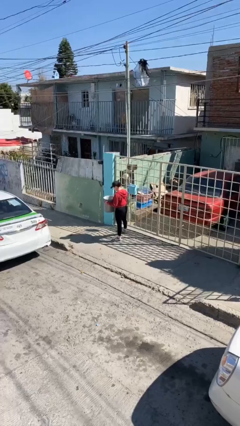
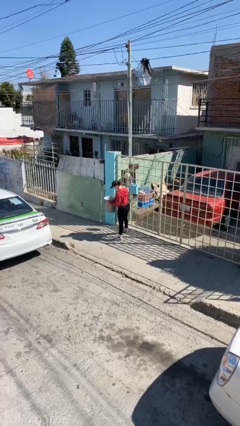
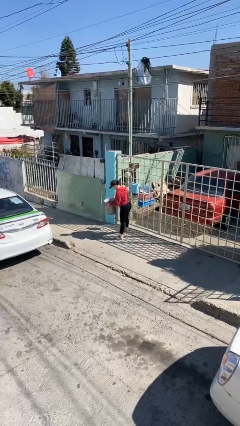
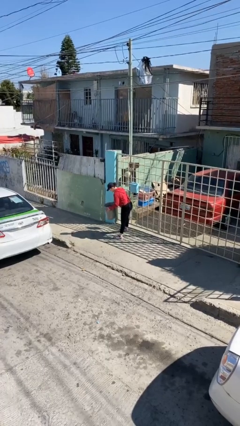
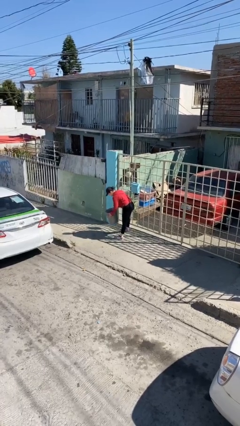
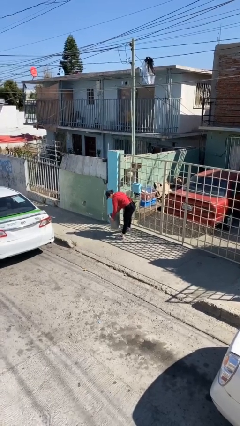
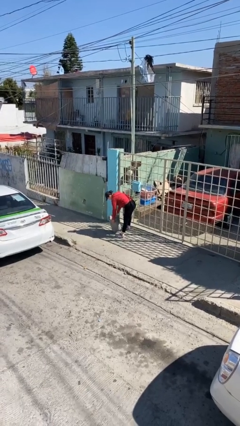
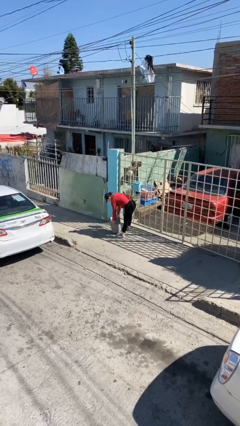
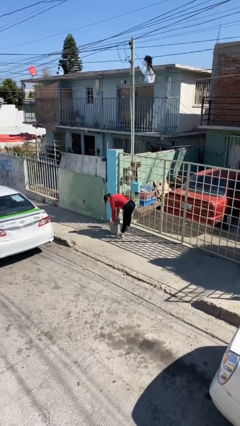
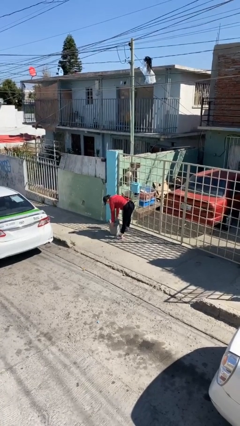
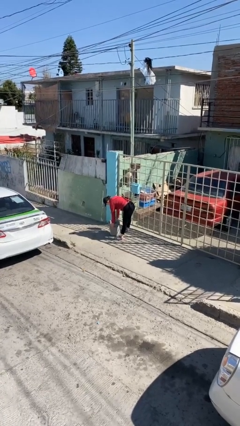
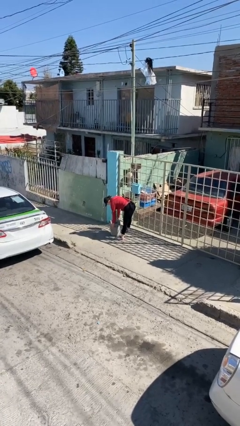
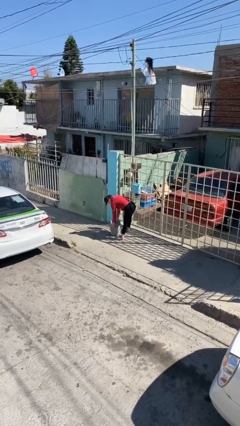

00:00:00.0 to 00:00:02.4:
person puts down object on floor

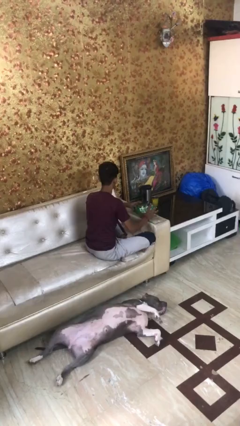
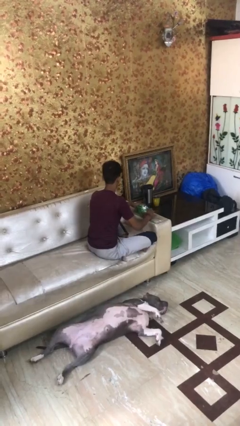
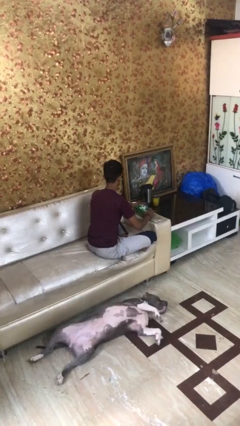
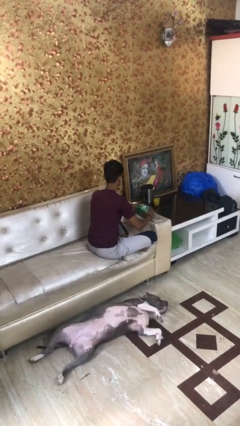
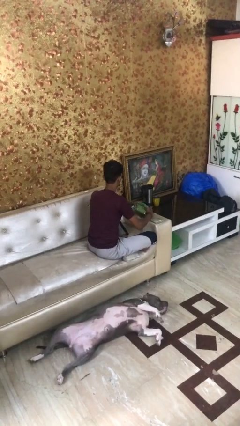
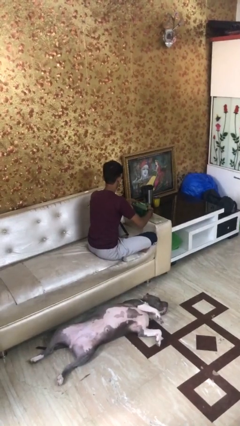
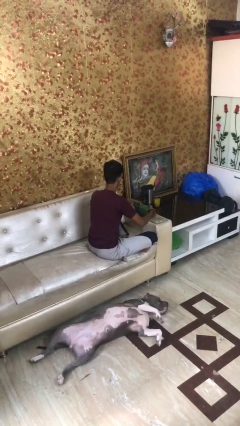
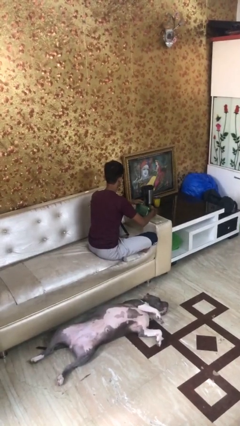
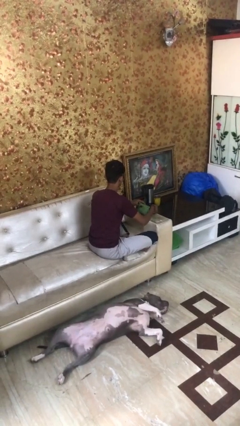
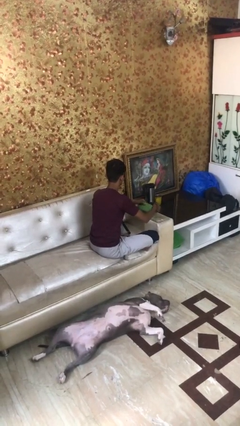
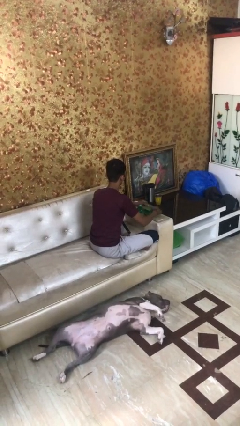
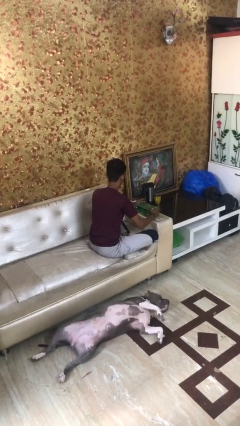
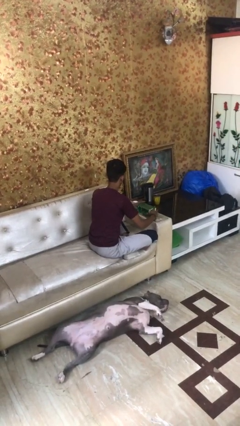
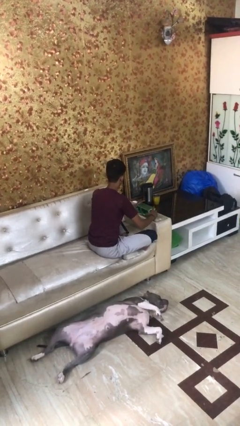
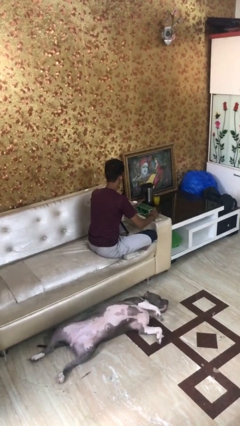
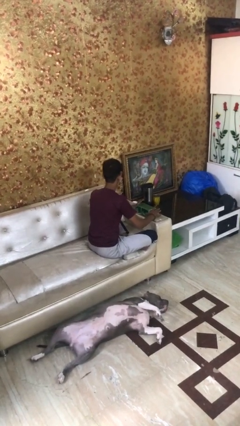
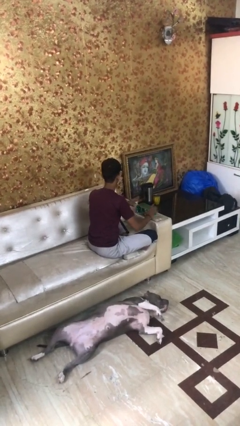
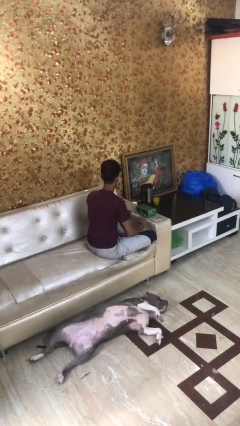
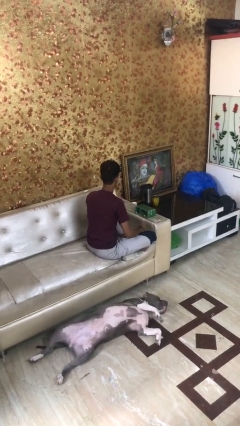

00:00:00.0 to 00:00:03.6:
person wraps box

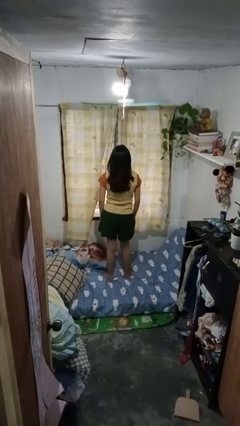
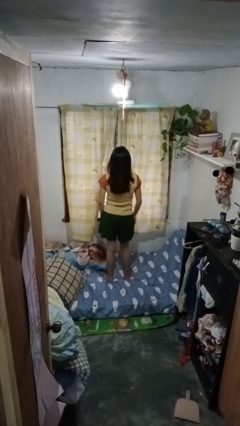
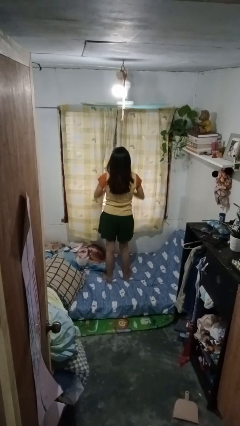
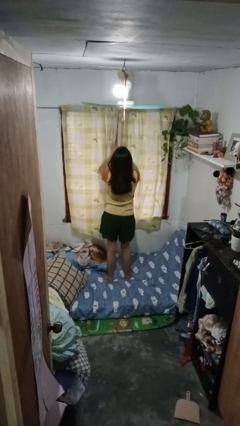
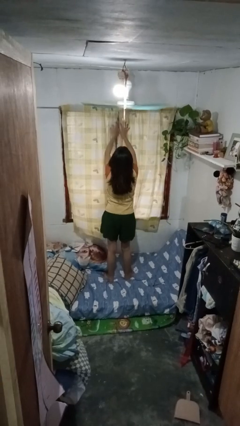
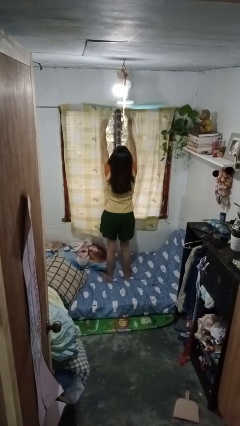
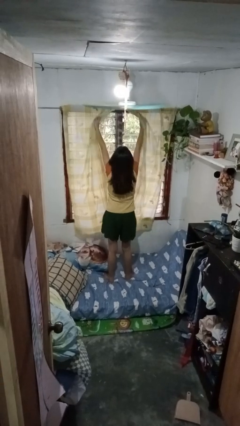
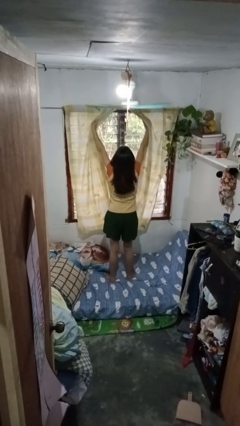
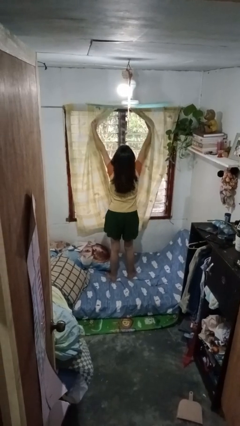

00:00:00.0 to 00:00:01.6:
person opens curtains

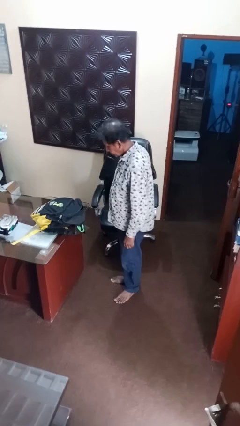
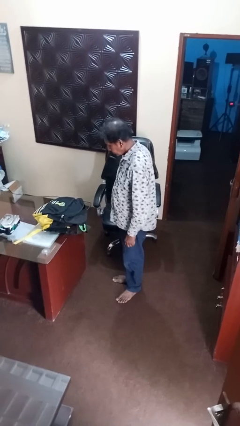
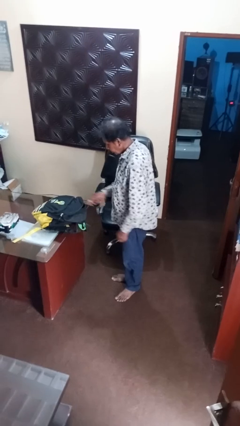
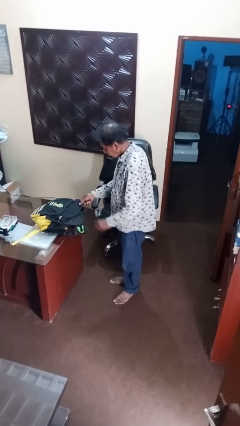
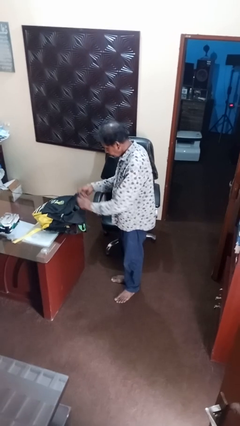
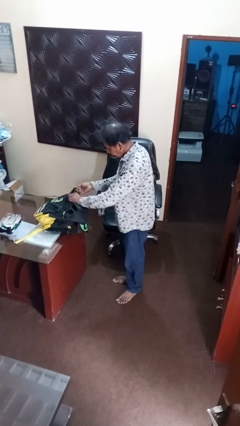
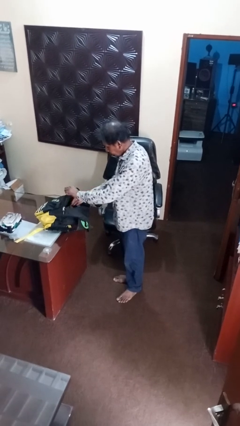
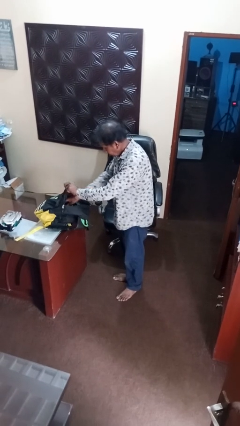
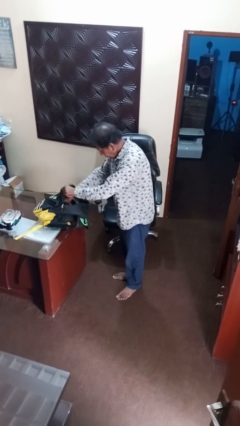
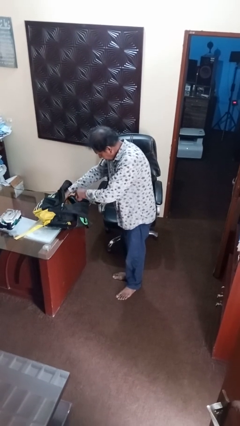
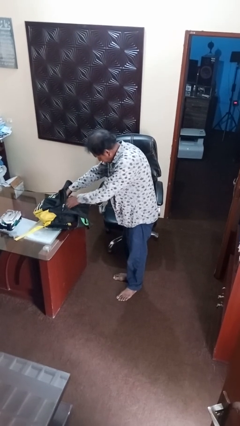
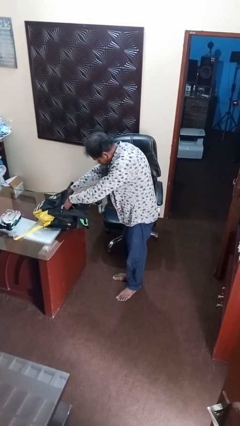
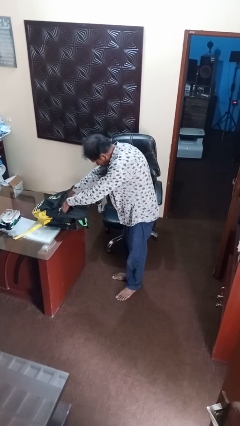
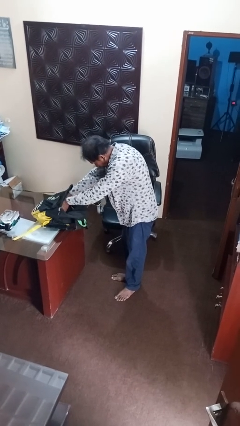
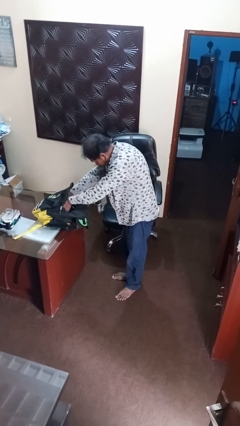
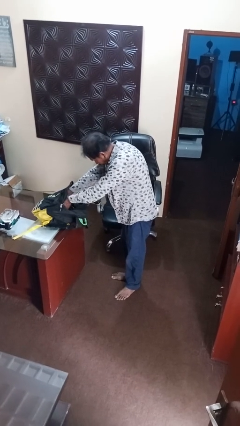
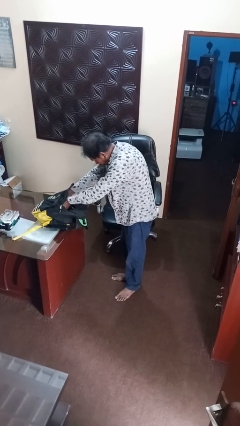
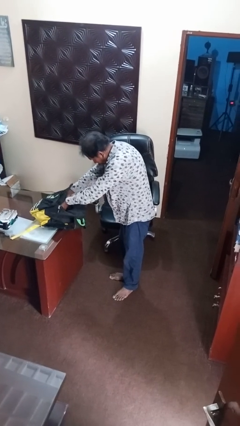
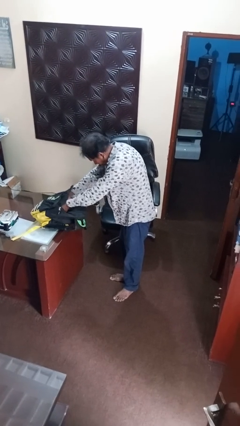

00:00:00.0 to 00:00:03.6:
person searches in backpack

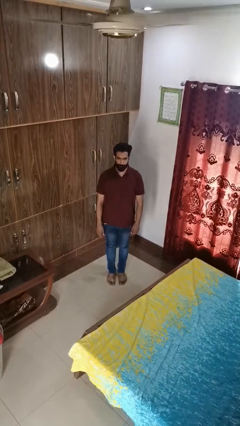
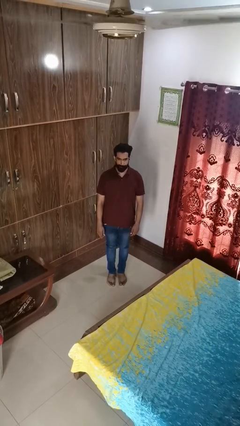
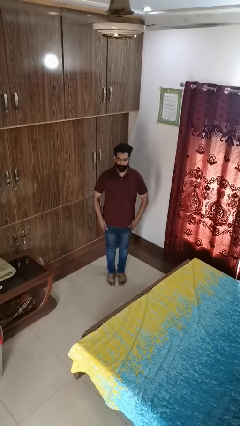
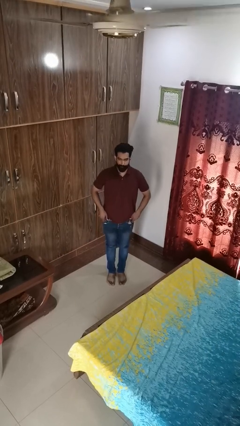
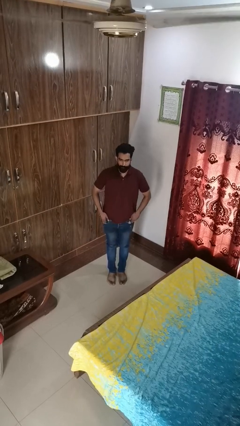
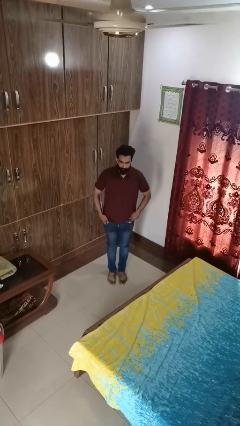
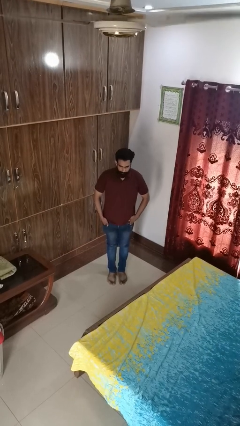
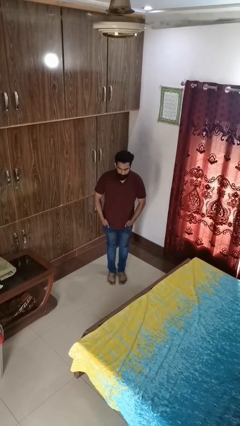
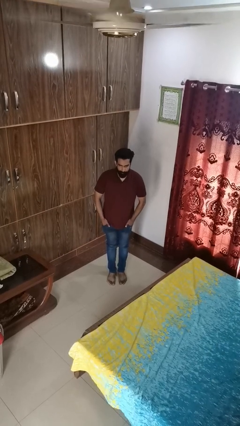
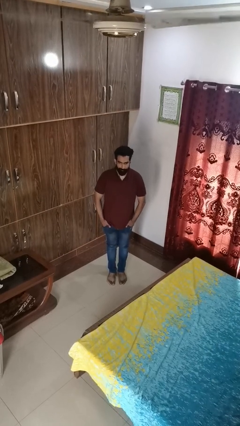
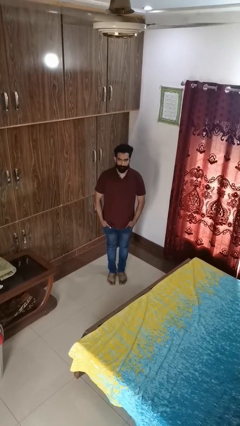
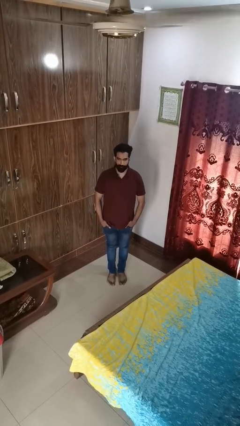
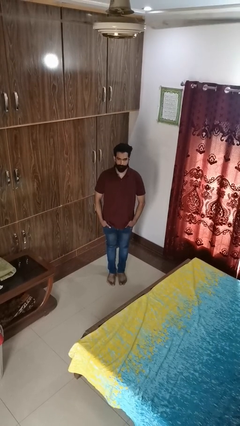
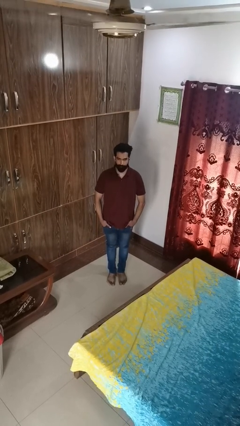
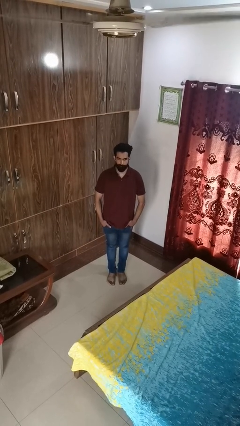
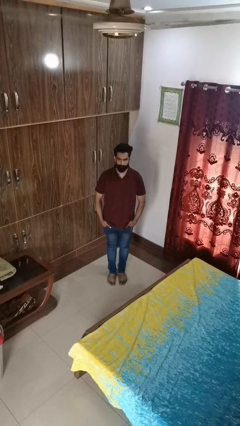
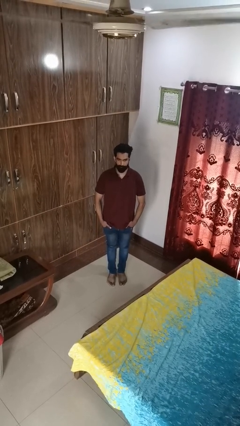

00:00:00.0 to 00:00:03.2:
person puts hands in back pockets

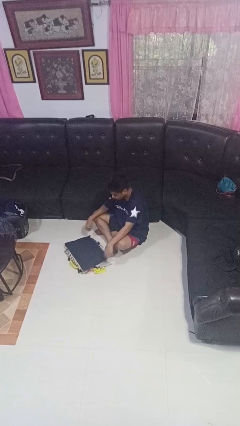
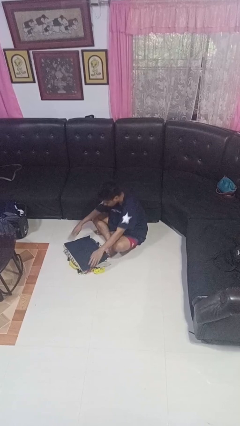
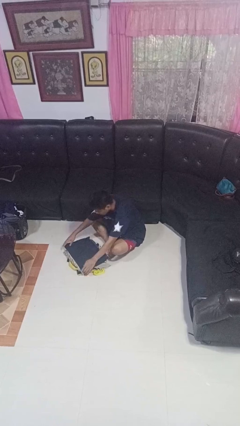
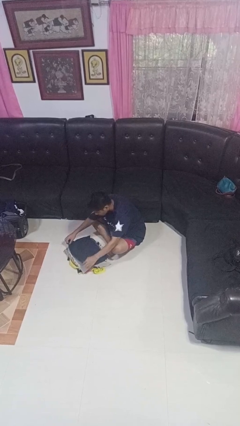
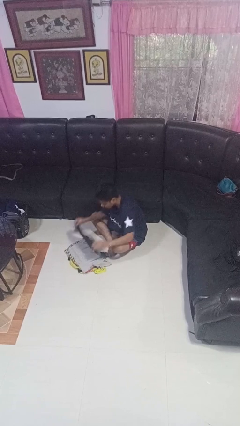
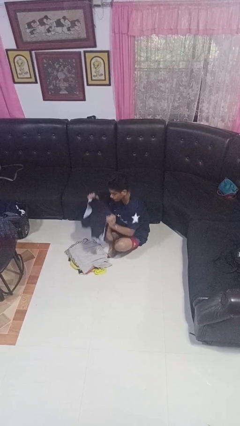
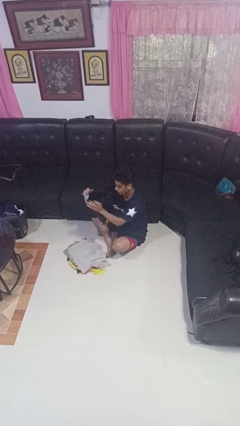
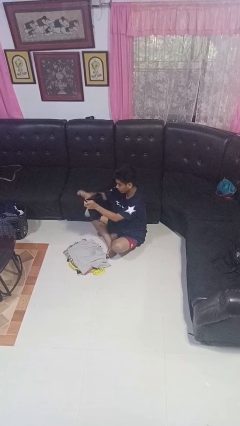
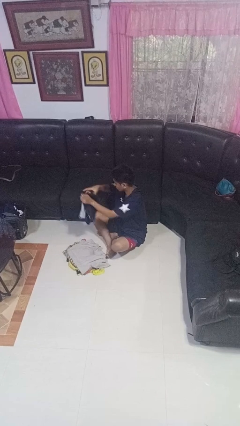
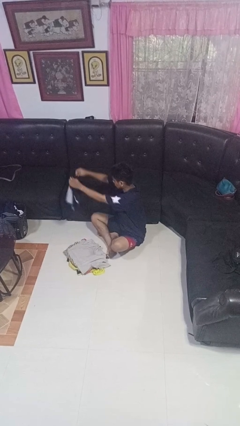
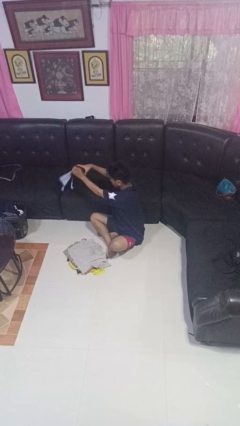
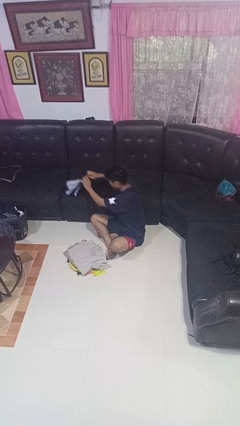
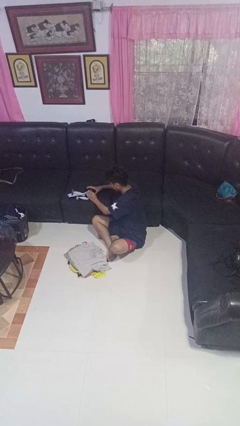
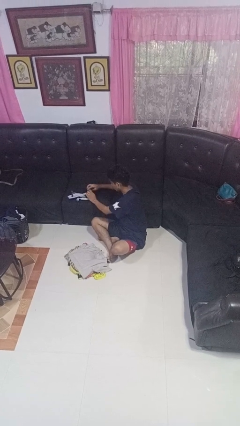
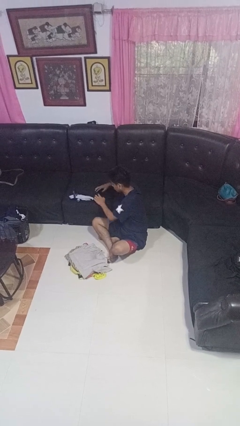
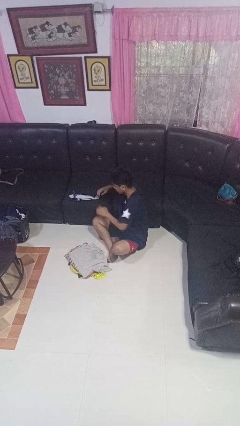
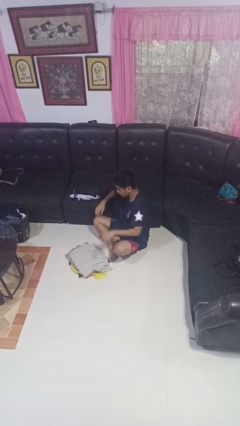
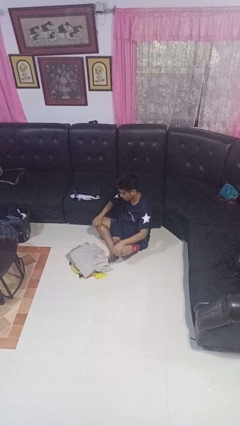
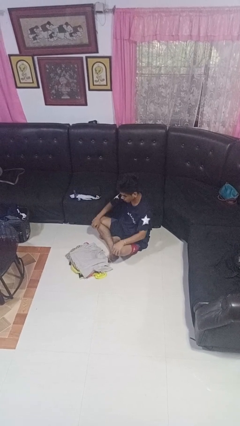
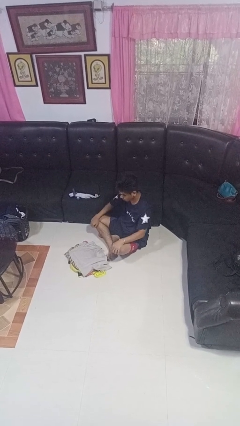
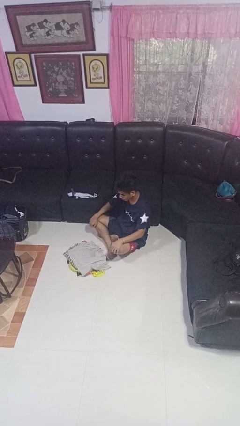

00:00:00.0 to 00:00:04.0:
person folds shirt
